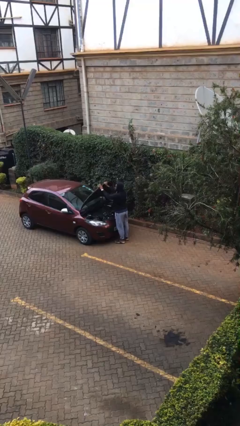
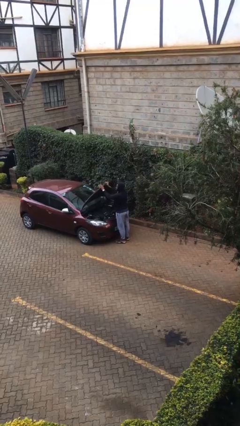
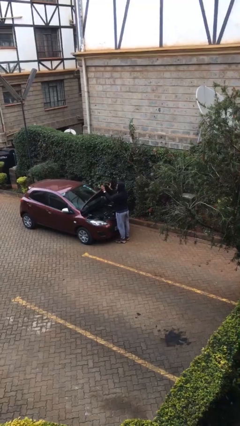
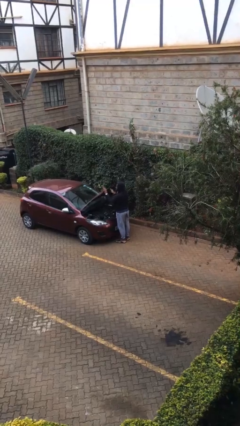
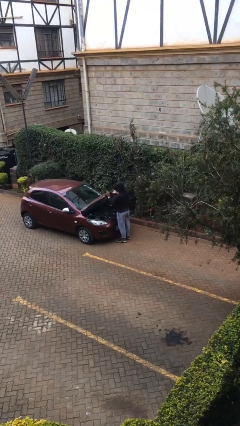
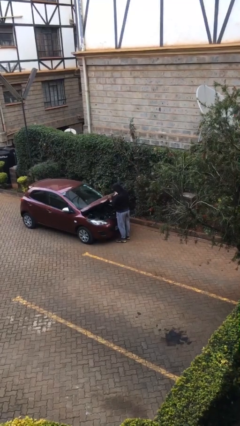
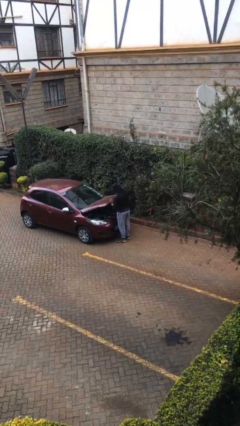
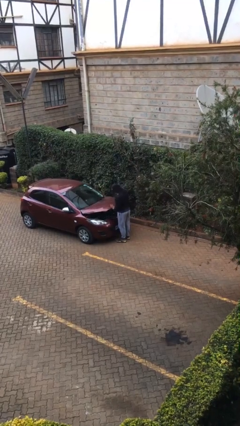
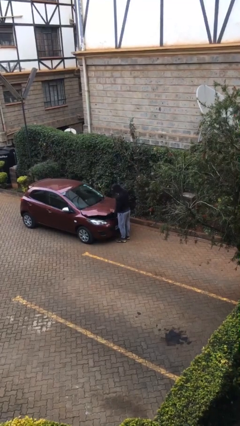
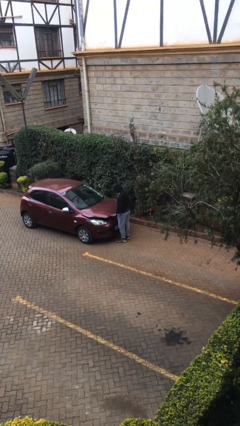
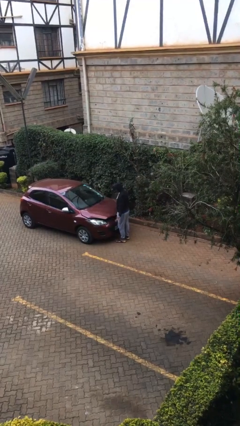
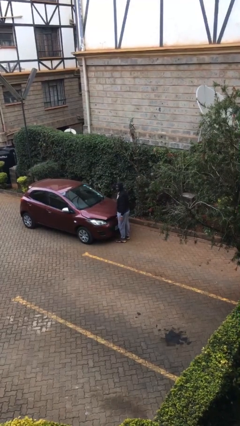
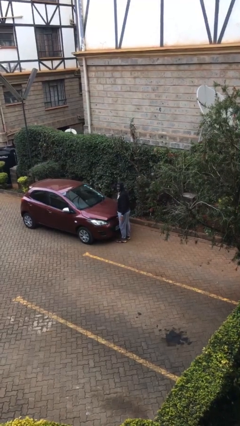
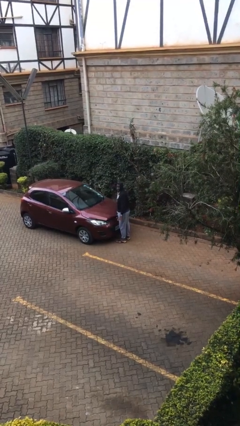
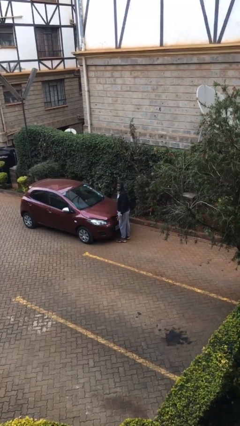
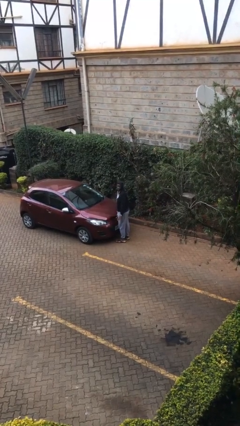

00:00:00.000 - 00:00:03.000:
person closes car hood

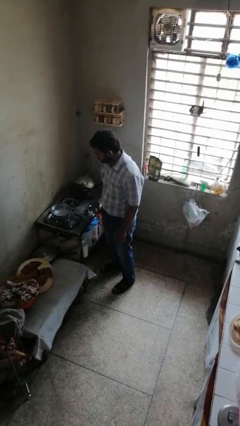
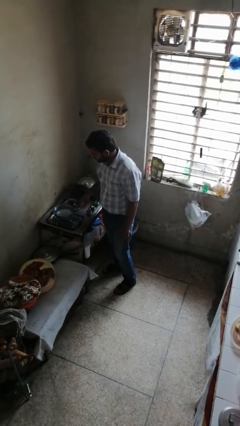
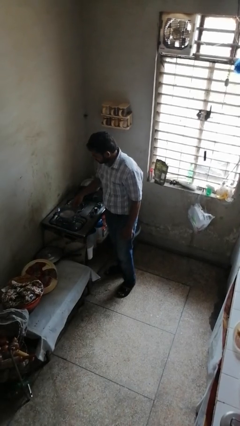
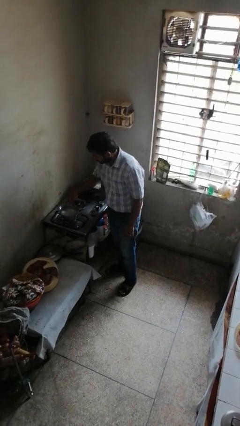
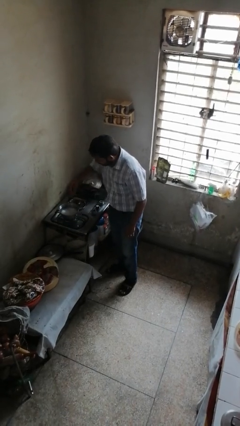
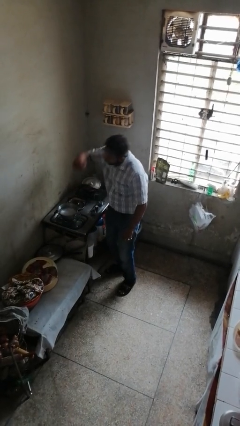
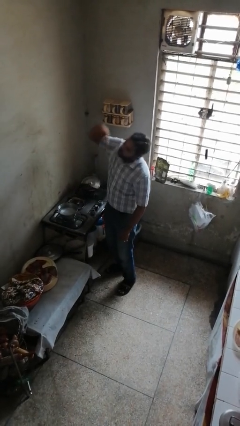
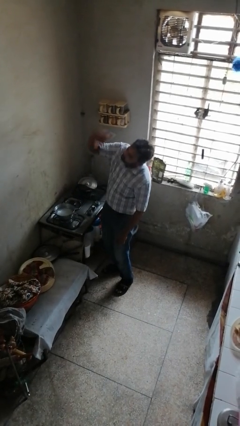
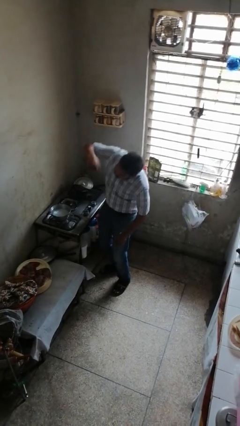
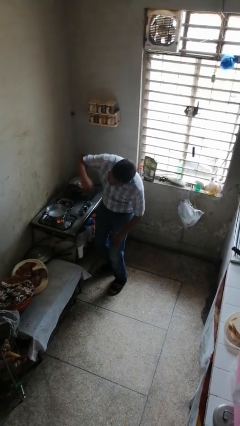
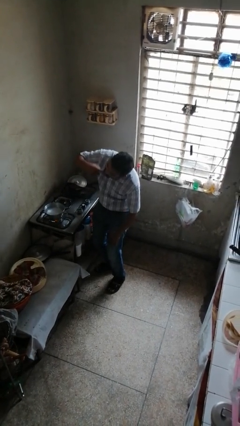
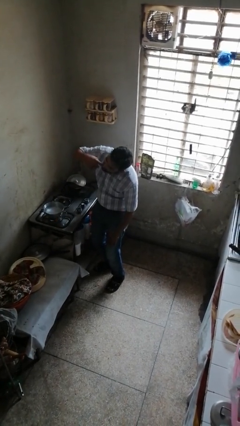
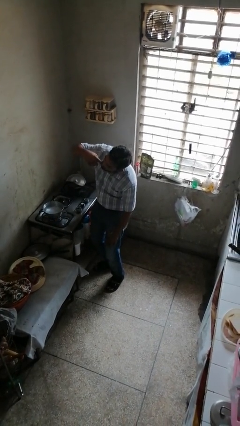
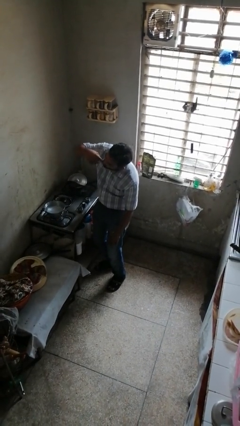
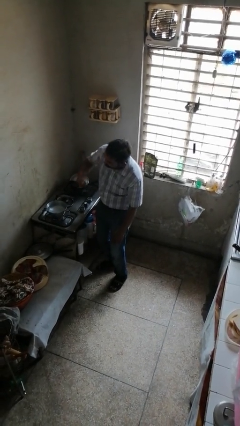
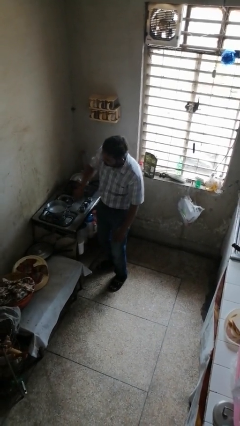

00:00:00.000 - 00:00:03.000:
person burns hand

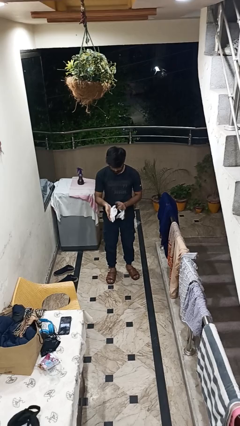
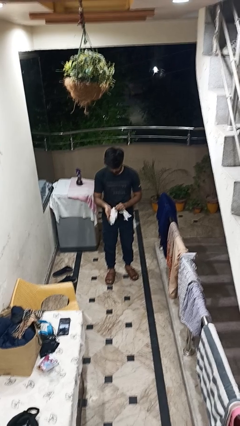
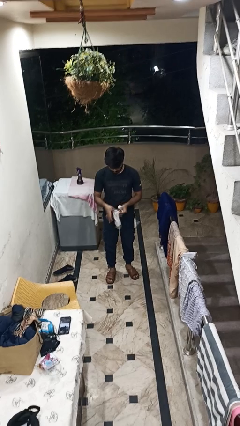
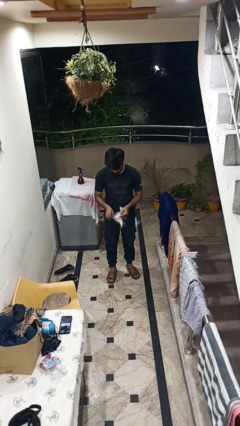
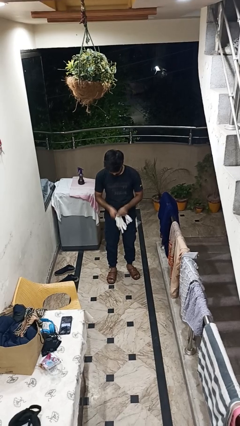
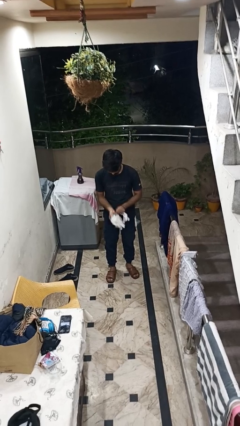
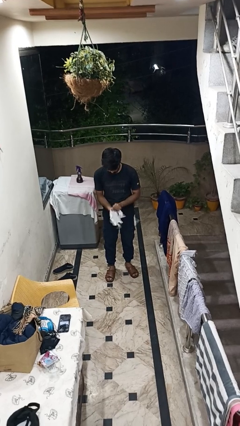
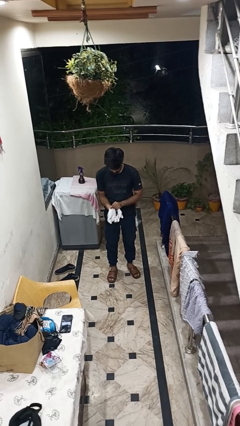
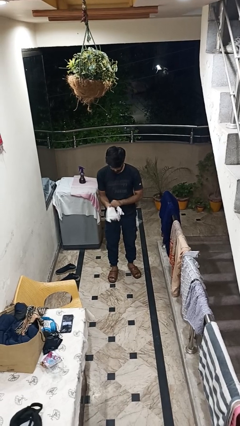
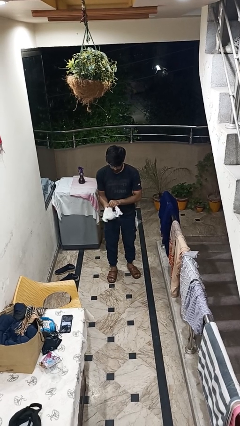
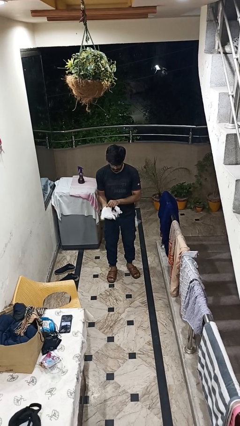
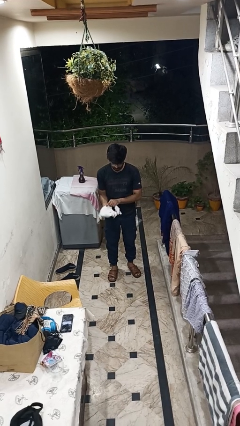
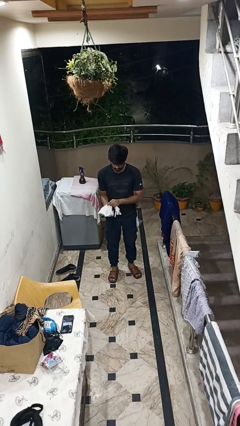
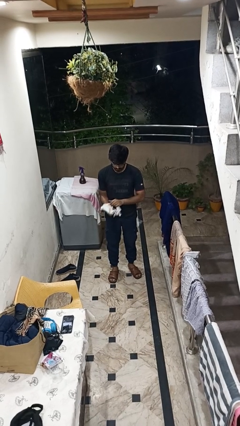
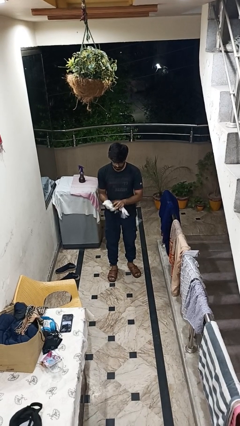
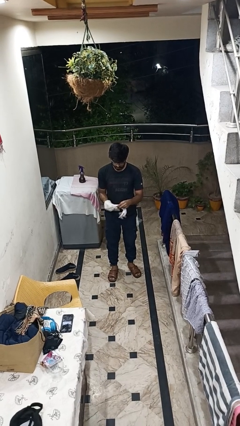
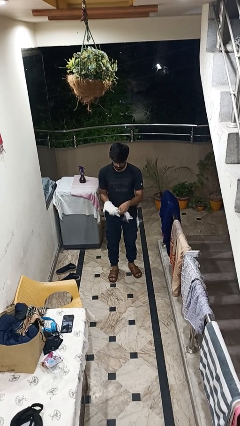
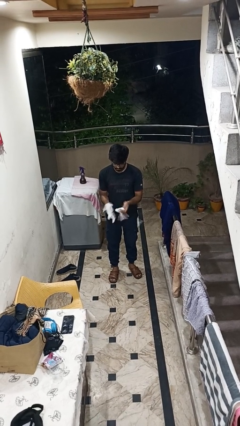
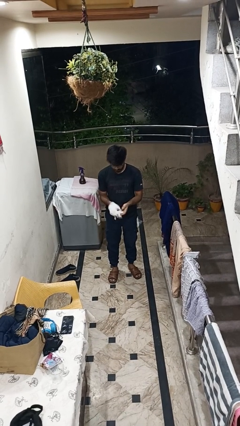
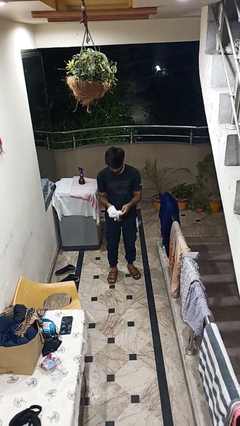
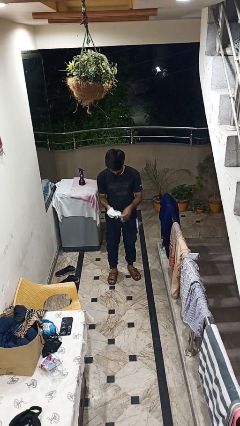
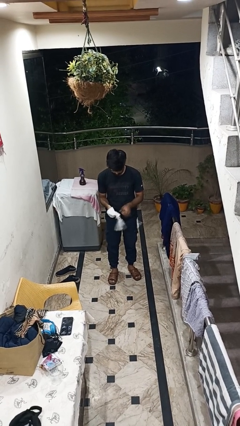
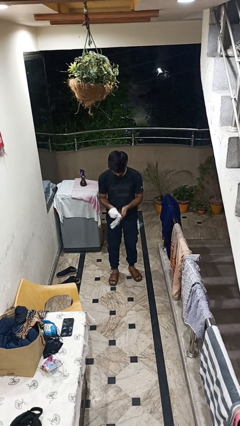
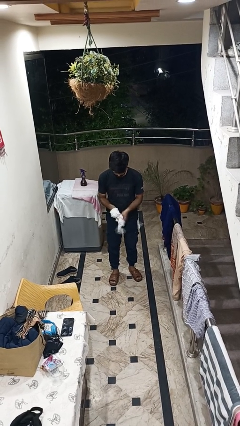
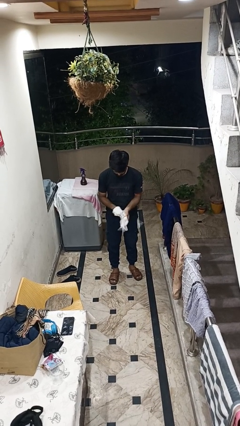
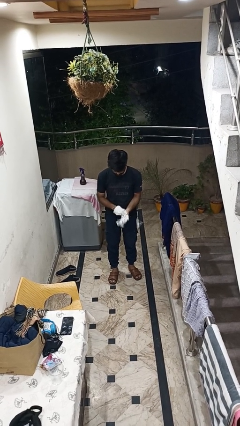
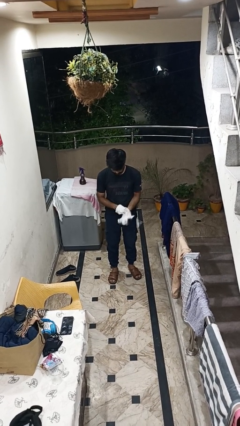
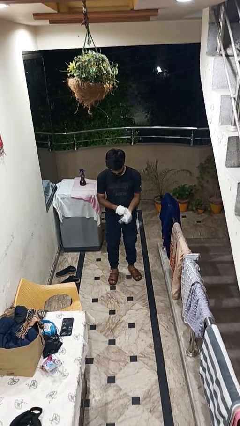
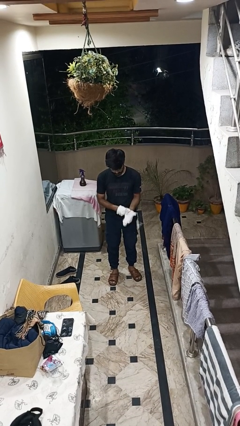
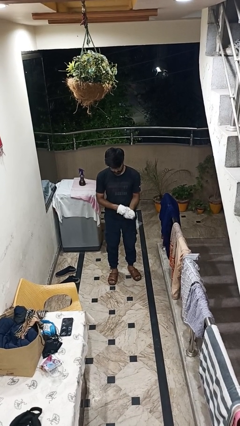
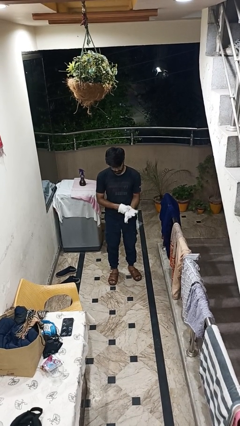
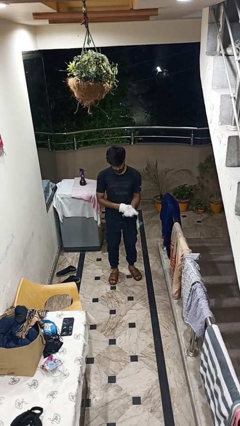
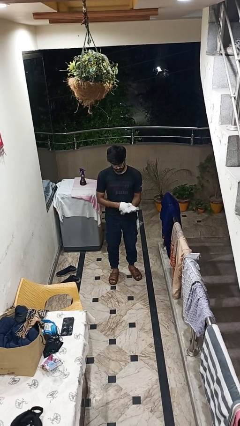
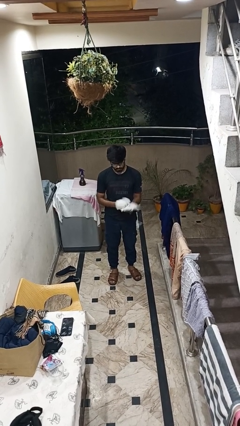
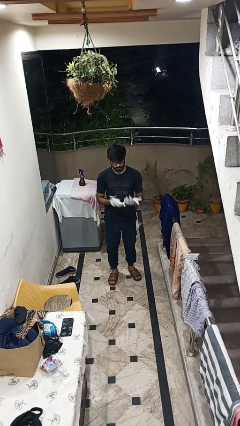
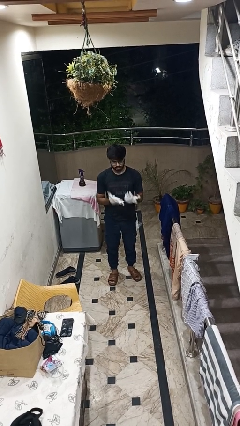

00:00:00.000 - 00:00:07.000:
person puts on gloves

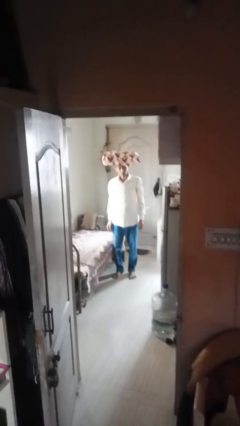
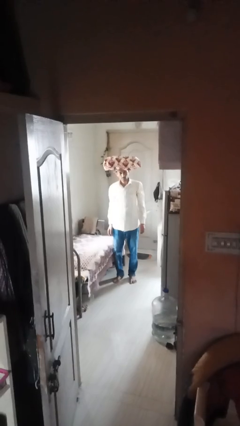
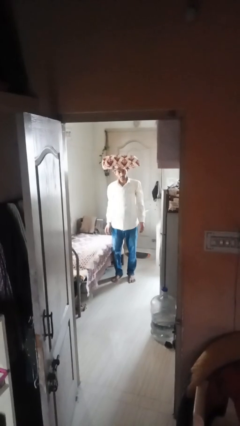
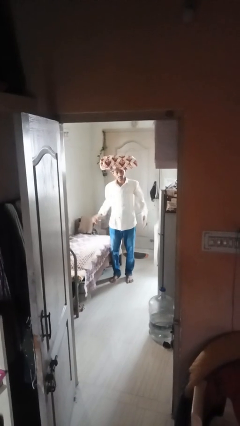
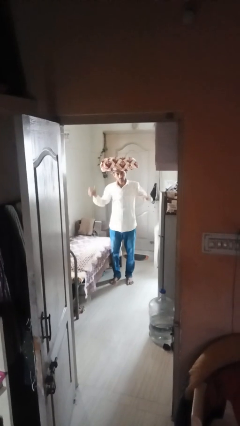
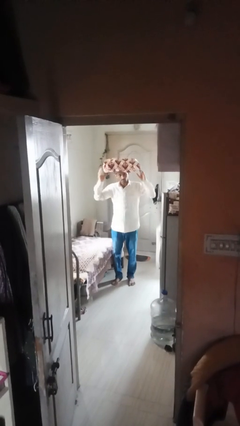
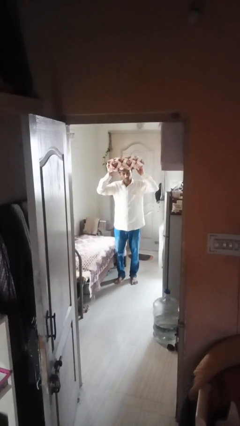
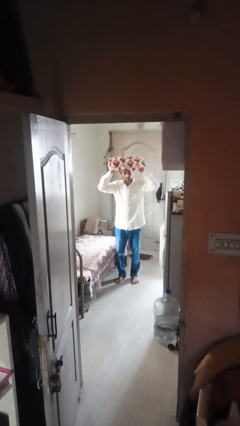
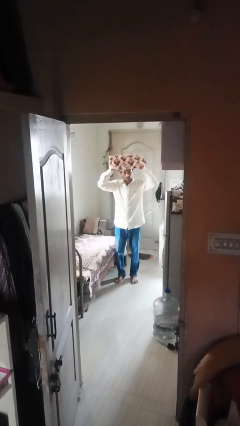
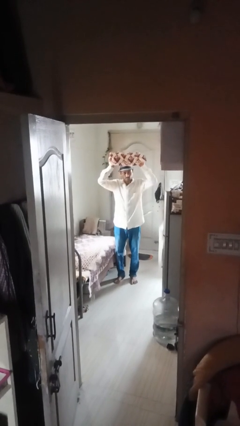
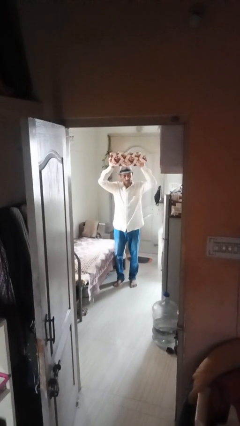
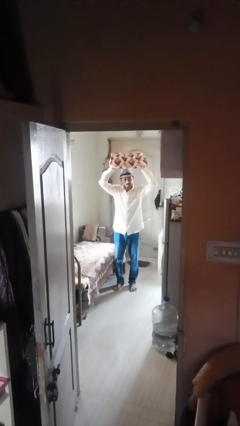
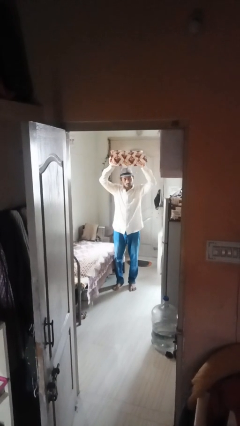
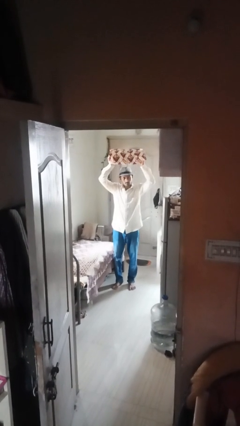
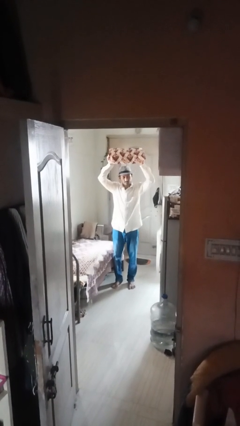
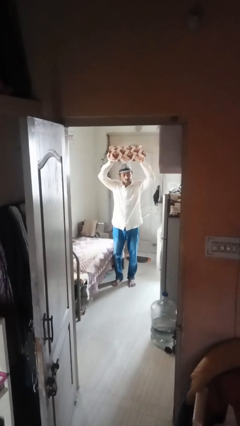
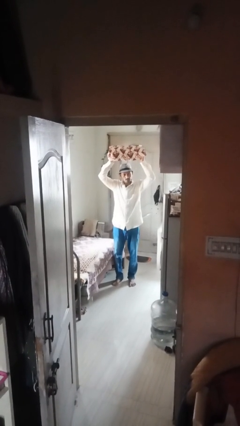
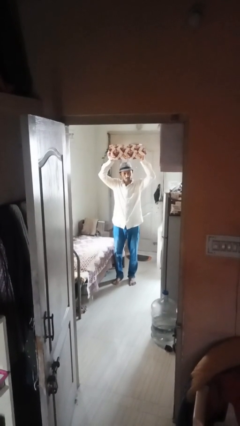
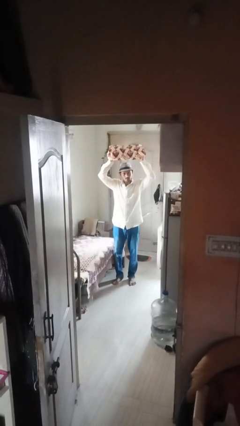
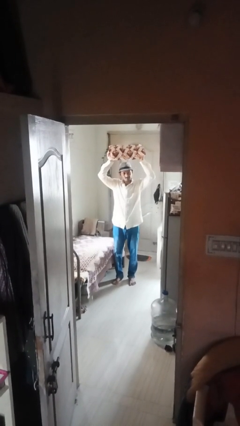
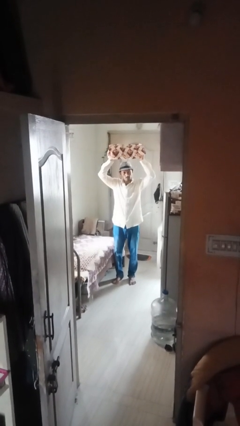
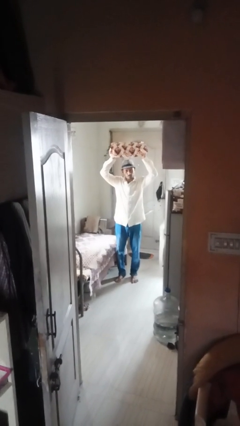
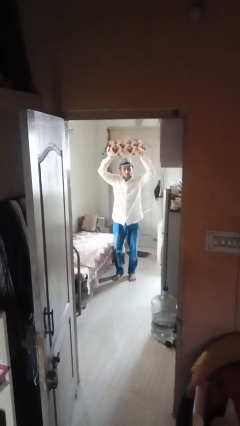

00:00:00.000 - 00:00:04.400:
person holds object above head

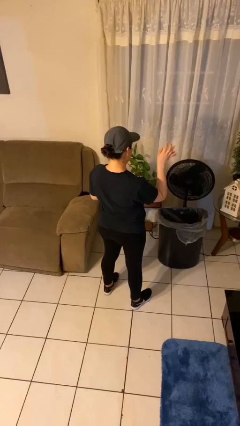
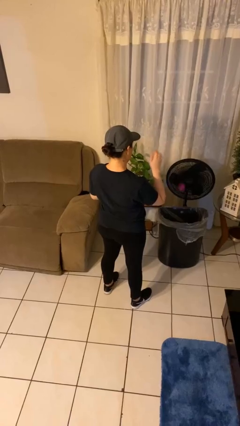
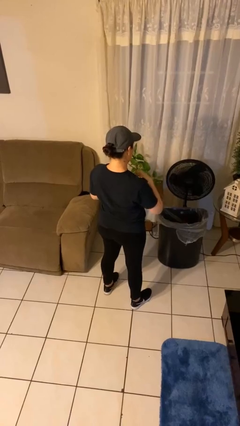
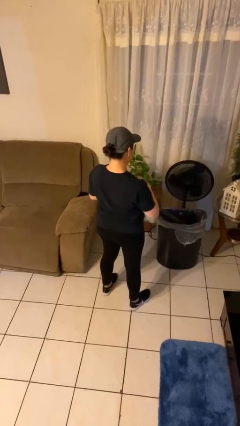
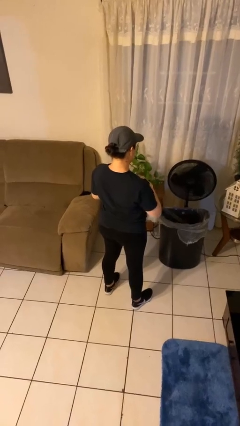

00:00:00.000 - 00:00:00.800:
person discards trash
